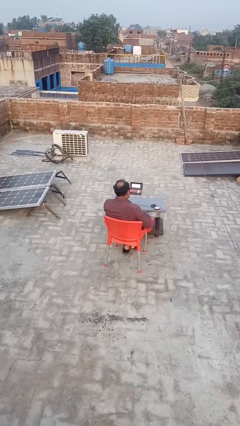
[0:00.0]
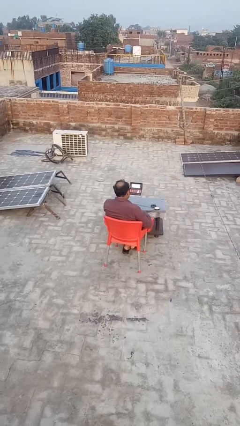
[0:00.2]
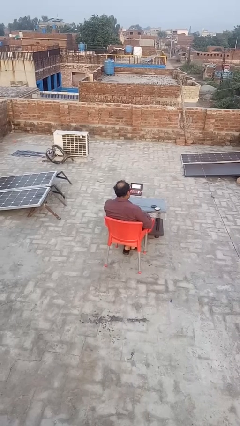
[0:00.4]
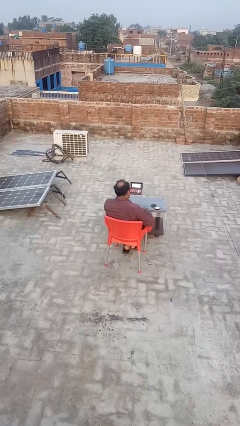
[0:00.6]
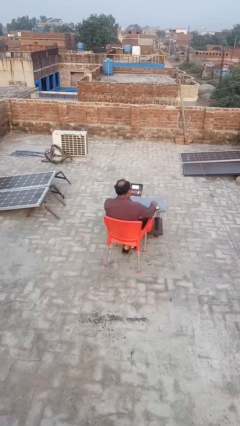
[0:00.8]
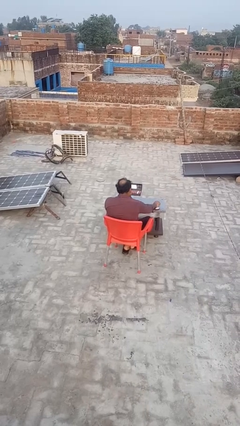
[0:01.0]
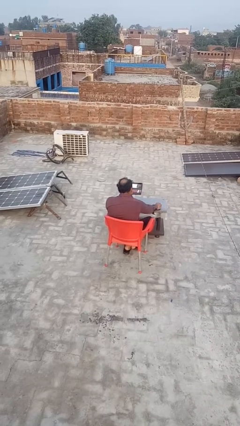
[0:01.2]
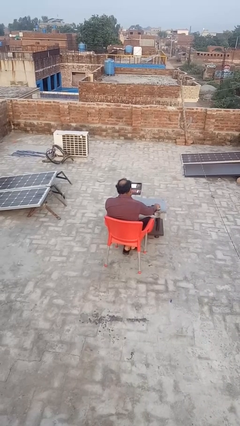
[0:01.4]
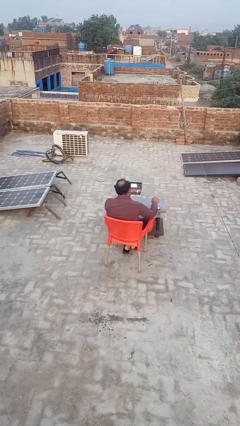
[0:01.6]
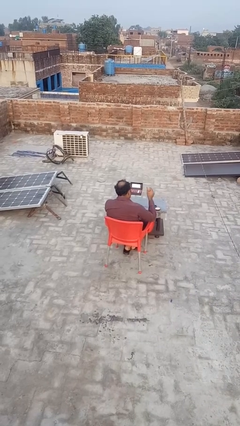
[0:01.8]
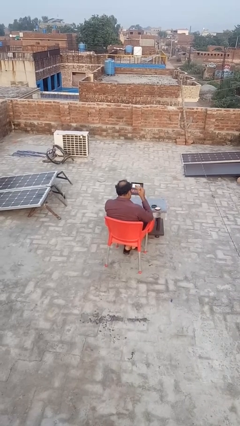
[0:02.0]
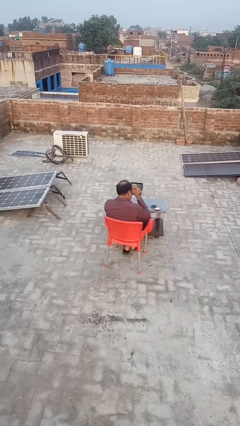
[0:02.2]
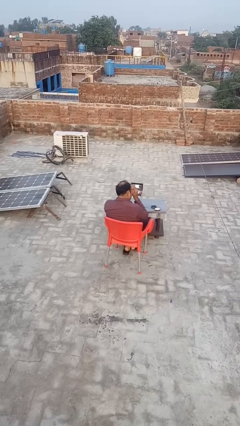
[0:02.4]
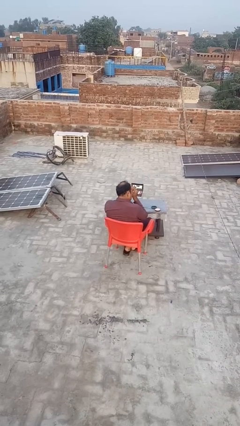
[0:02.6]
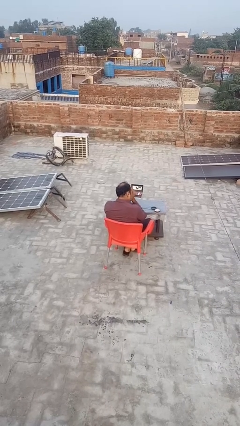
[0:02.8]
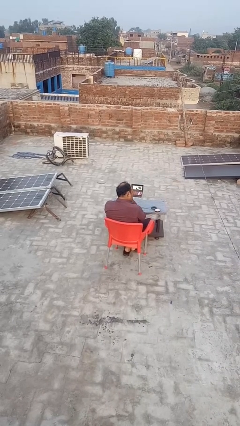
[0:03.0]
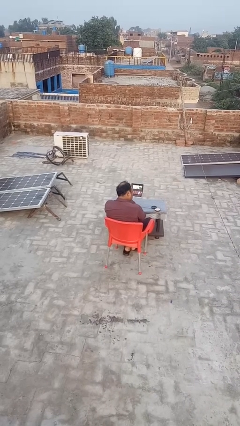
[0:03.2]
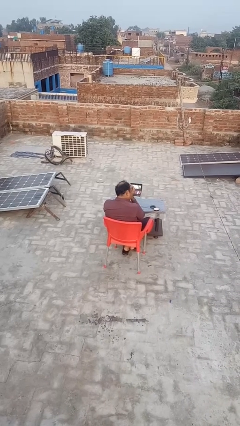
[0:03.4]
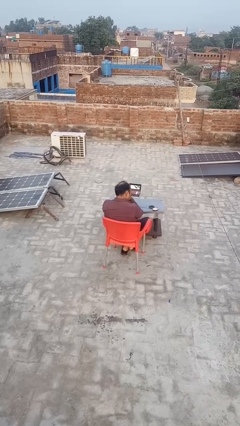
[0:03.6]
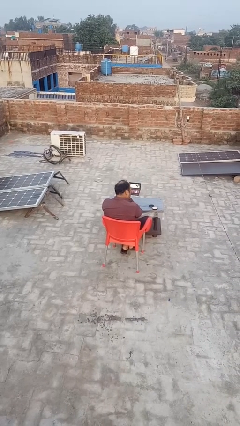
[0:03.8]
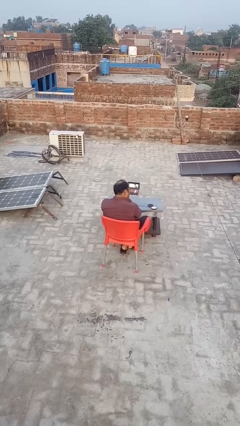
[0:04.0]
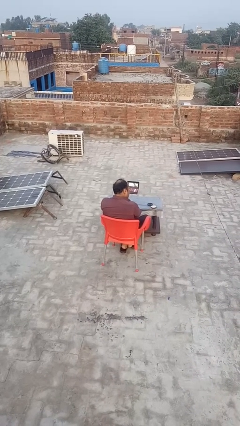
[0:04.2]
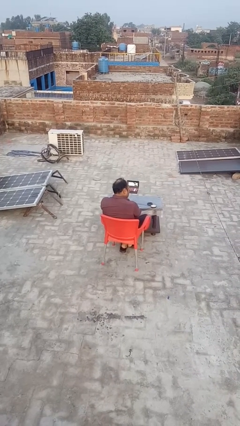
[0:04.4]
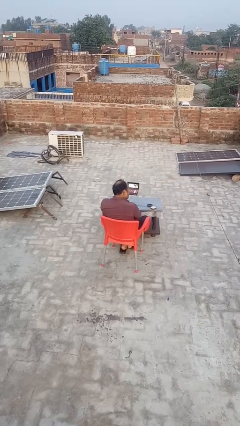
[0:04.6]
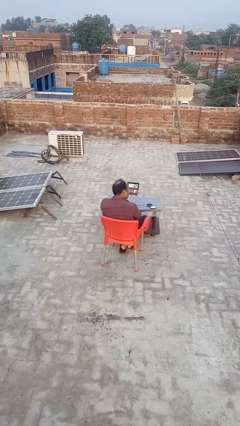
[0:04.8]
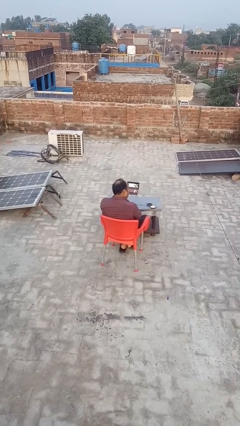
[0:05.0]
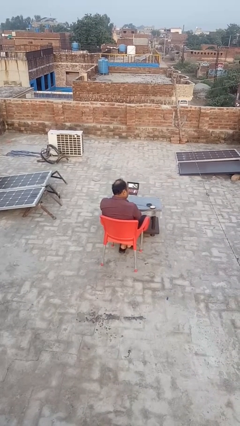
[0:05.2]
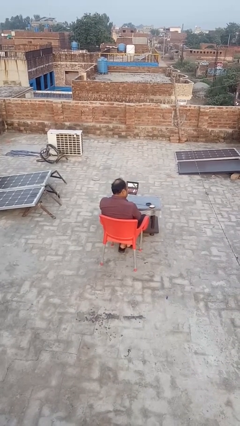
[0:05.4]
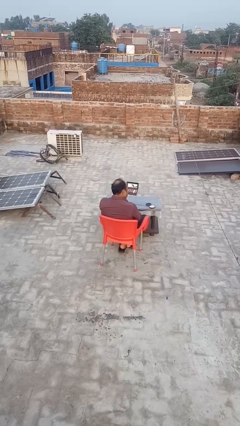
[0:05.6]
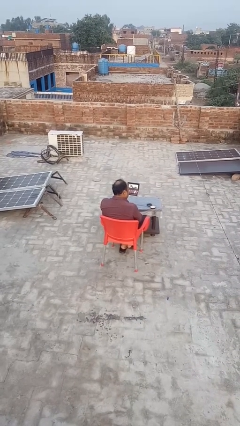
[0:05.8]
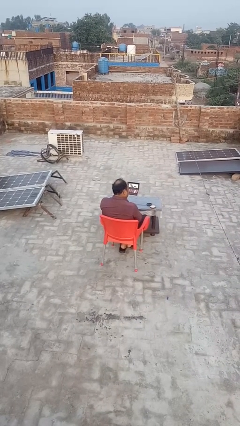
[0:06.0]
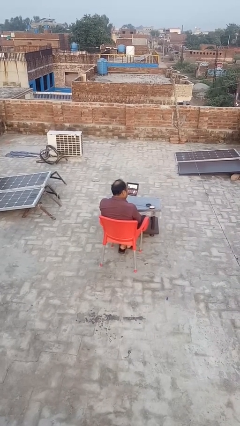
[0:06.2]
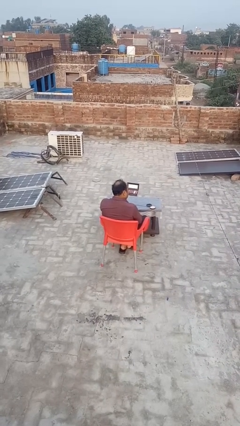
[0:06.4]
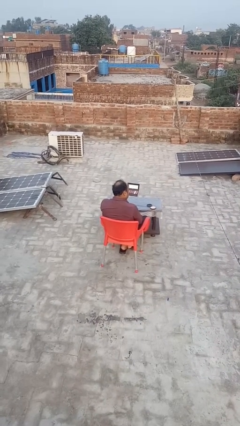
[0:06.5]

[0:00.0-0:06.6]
person applies foundation makeup

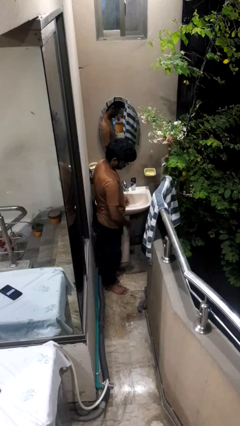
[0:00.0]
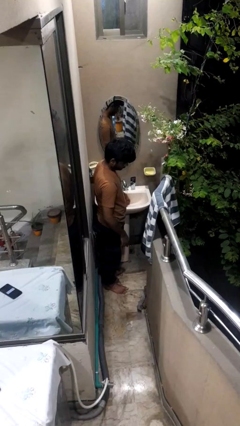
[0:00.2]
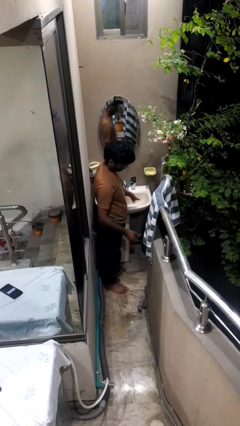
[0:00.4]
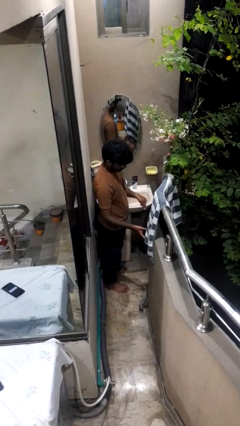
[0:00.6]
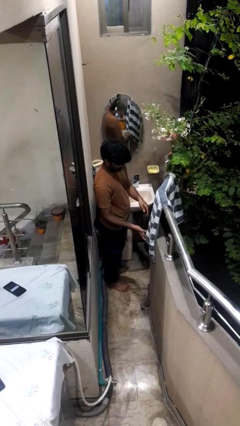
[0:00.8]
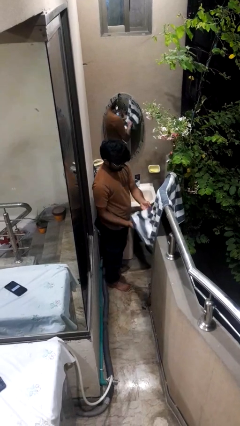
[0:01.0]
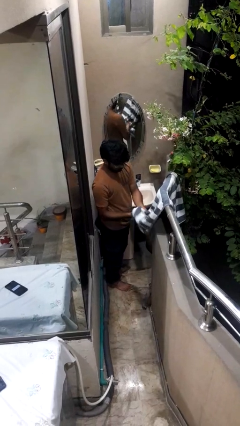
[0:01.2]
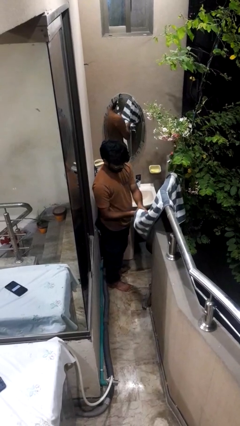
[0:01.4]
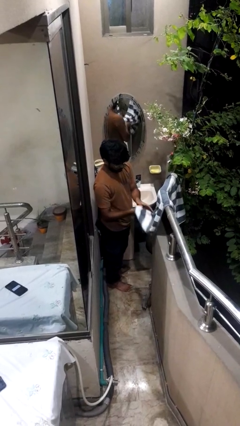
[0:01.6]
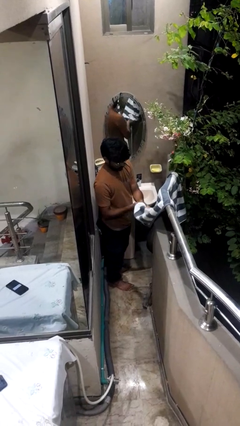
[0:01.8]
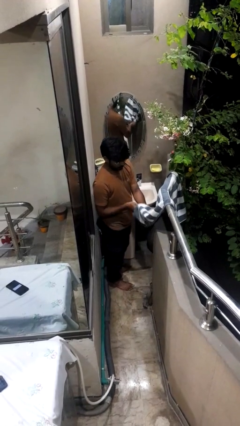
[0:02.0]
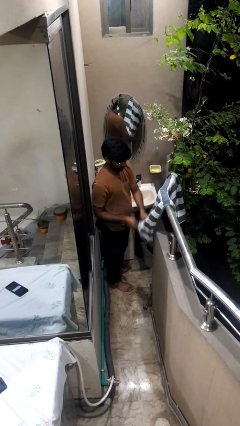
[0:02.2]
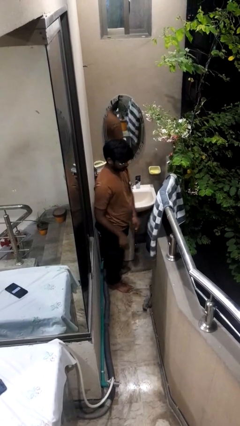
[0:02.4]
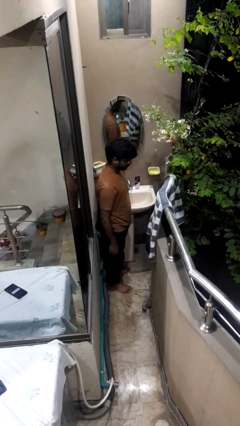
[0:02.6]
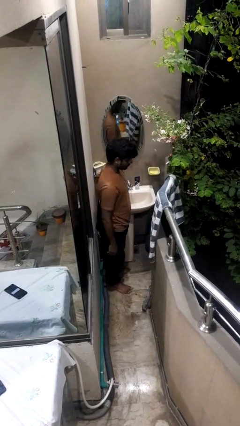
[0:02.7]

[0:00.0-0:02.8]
person dries hands with towel

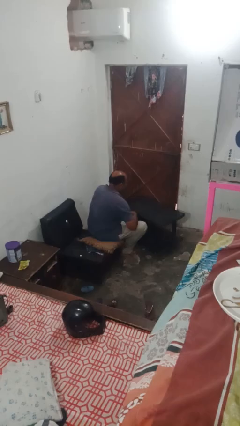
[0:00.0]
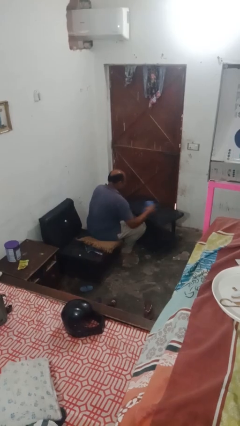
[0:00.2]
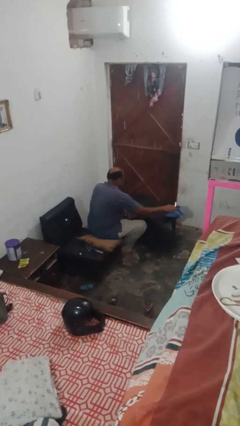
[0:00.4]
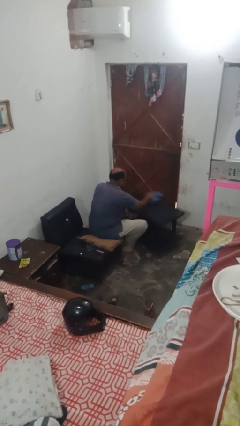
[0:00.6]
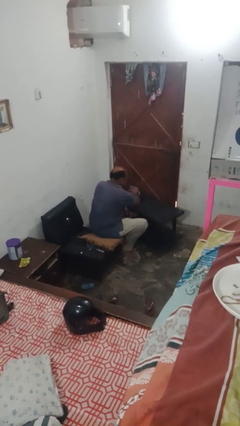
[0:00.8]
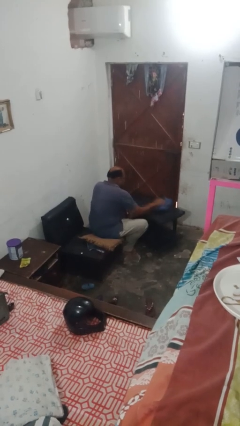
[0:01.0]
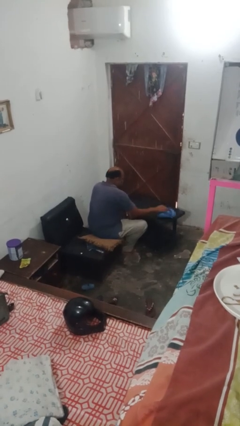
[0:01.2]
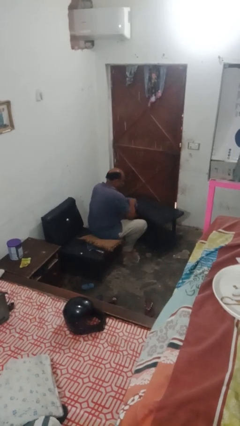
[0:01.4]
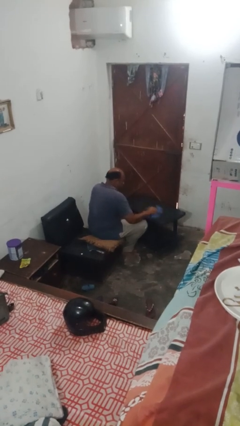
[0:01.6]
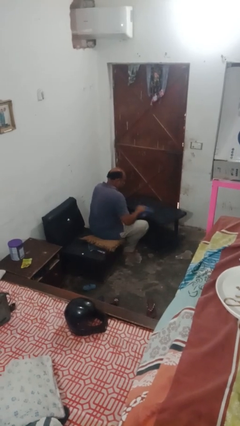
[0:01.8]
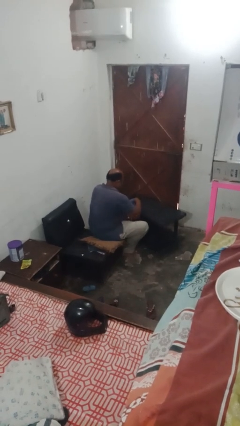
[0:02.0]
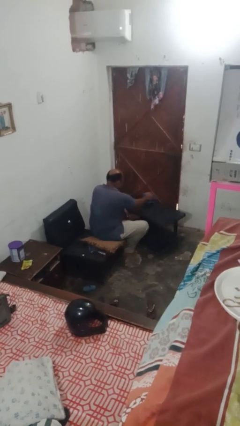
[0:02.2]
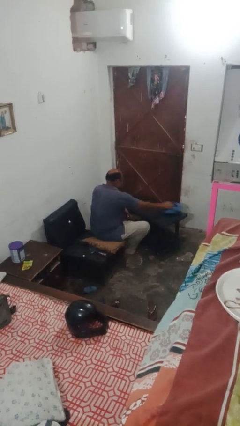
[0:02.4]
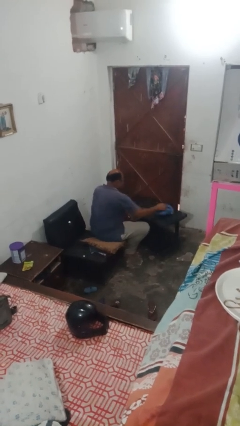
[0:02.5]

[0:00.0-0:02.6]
person cleans table with rag

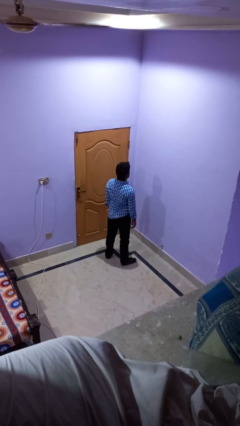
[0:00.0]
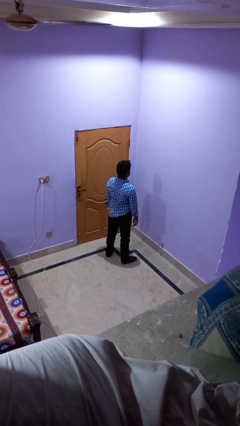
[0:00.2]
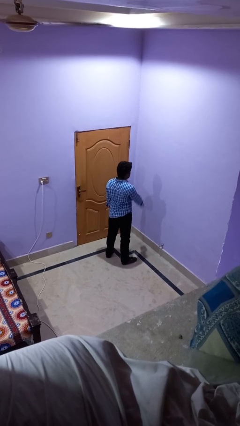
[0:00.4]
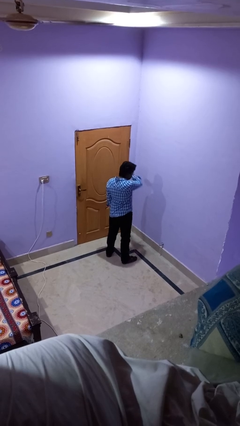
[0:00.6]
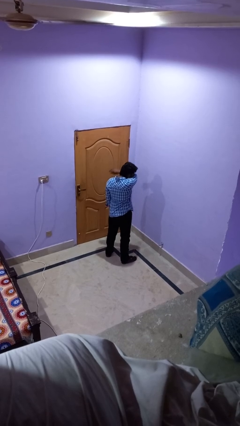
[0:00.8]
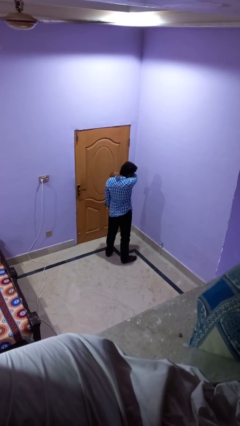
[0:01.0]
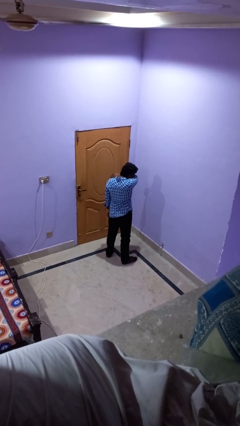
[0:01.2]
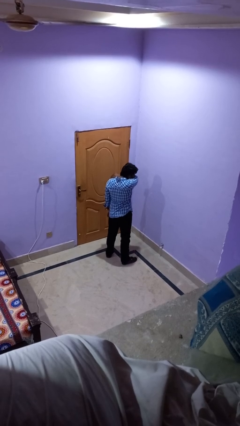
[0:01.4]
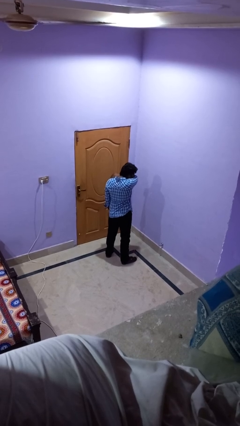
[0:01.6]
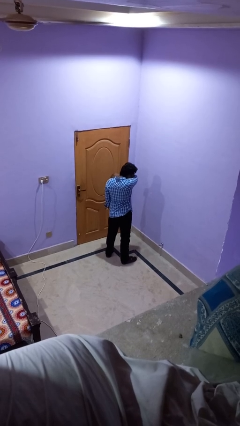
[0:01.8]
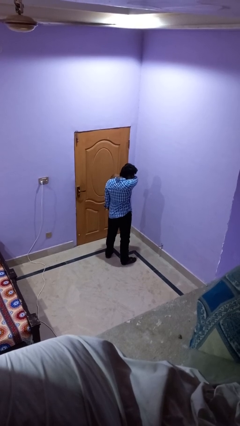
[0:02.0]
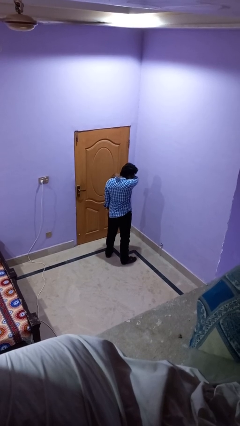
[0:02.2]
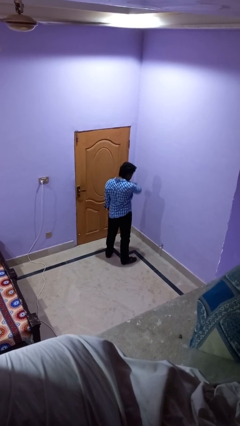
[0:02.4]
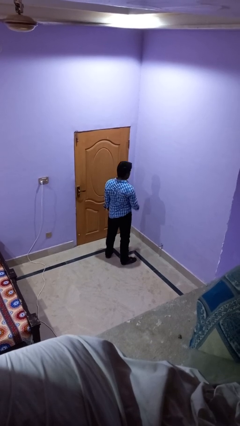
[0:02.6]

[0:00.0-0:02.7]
person sneezes into arm

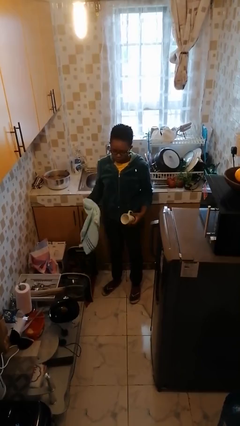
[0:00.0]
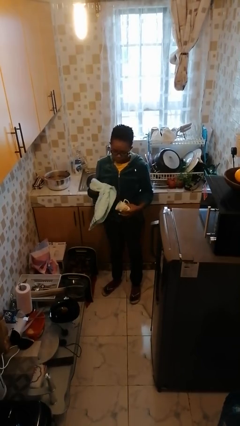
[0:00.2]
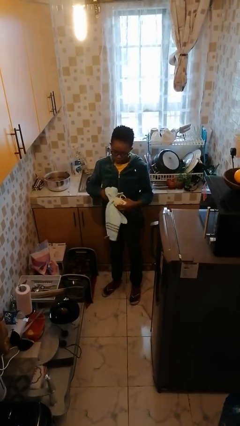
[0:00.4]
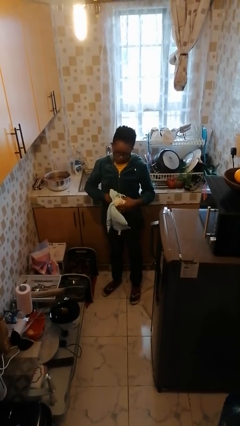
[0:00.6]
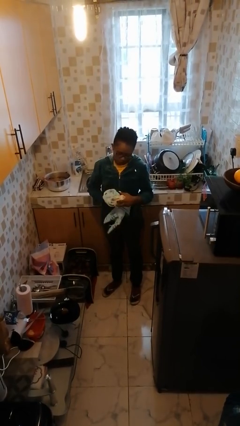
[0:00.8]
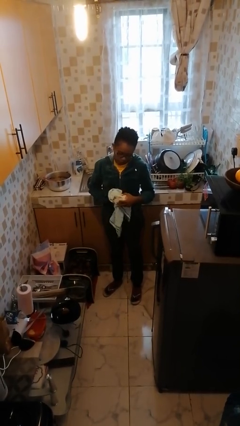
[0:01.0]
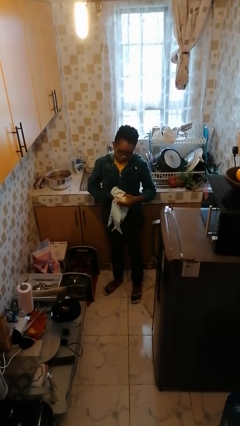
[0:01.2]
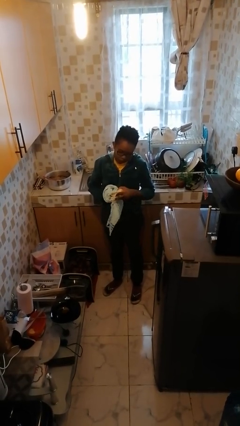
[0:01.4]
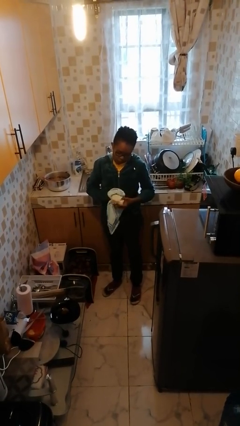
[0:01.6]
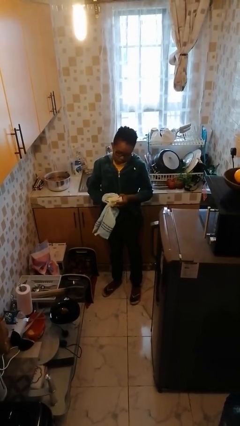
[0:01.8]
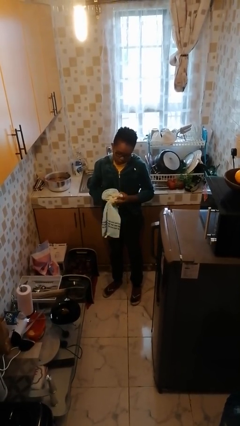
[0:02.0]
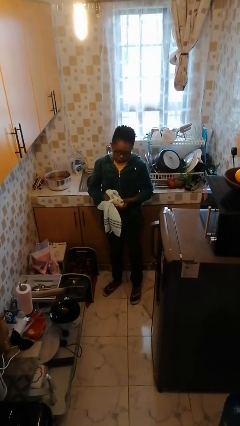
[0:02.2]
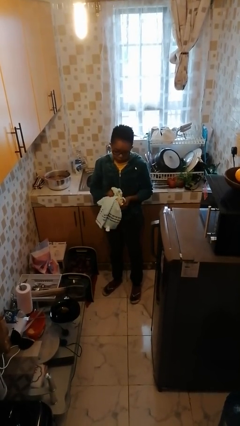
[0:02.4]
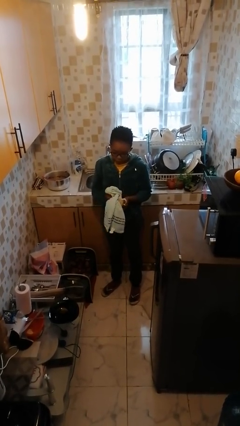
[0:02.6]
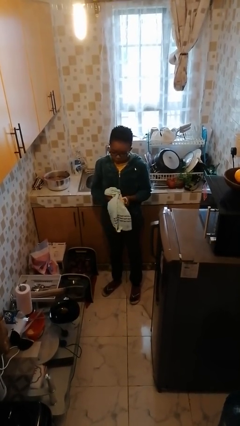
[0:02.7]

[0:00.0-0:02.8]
person dries dish

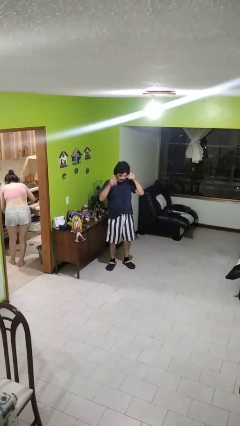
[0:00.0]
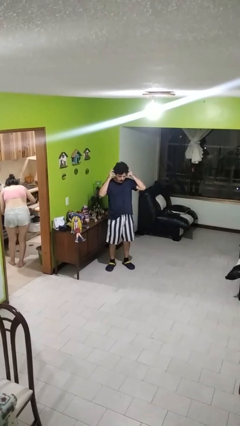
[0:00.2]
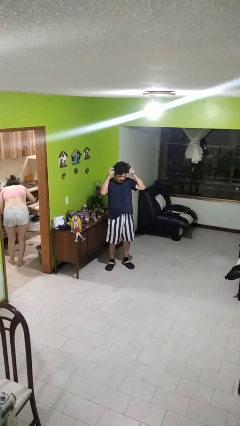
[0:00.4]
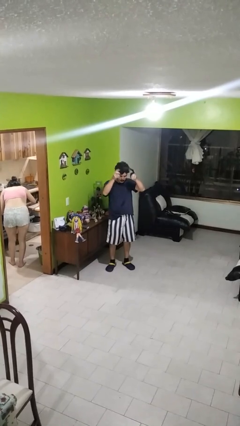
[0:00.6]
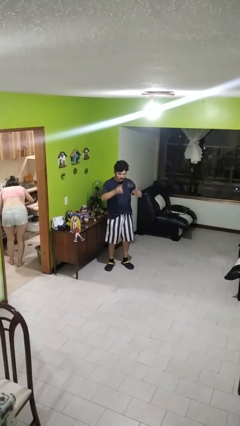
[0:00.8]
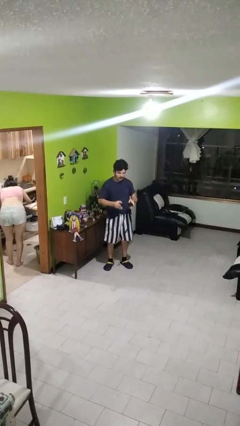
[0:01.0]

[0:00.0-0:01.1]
person takes off headphones
